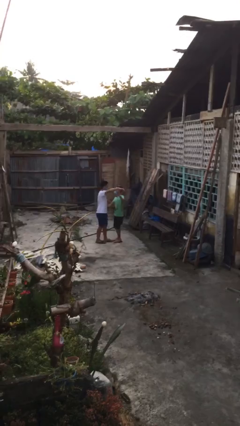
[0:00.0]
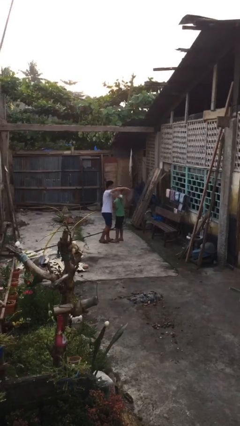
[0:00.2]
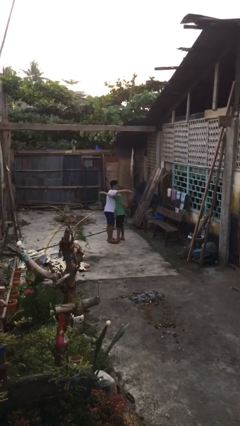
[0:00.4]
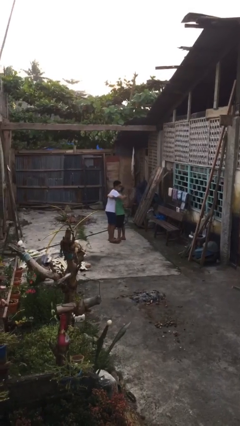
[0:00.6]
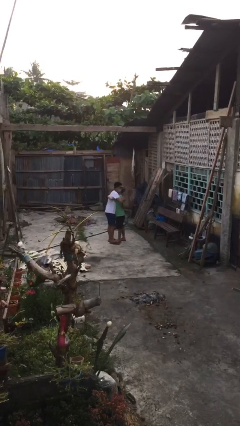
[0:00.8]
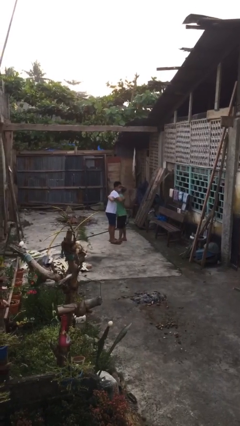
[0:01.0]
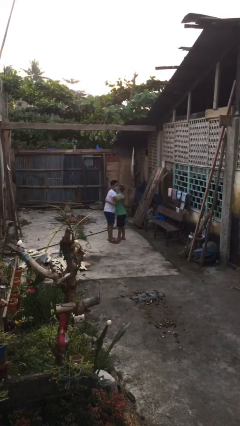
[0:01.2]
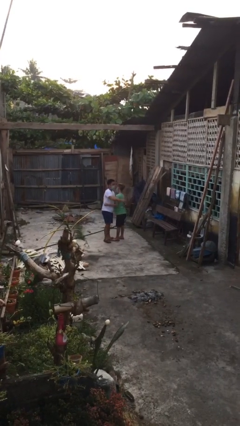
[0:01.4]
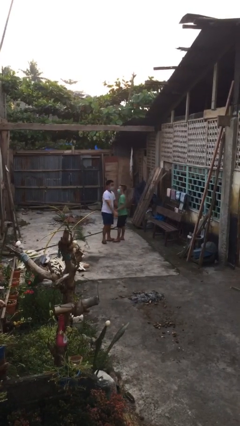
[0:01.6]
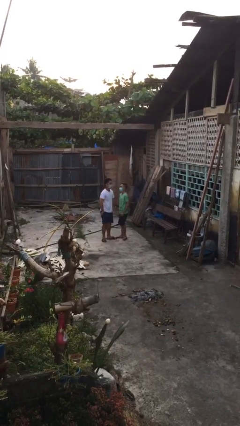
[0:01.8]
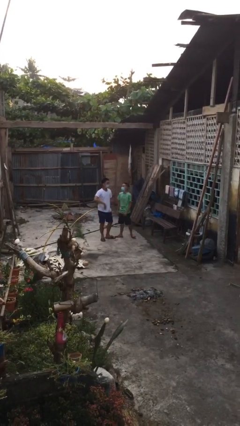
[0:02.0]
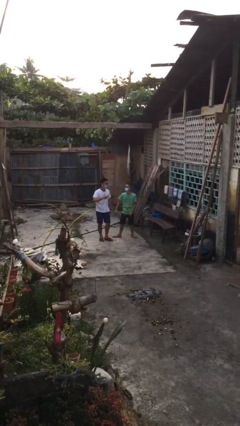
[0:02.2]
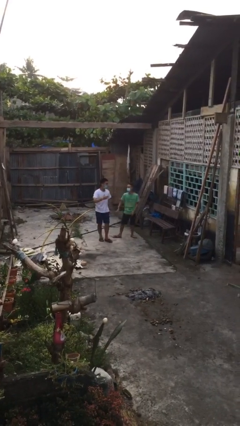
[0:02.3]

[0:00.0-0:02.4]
person embraces person

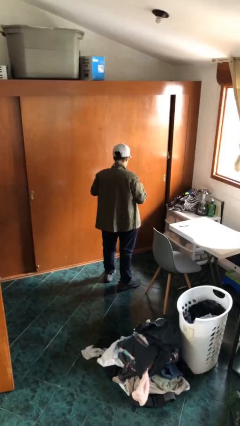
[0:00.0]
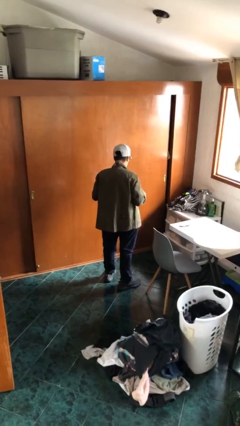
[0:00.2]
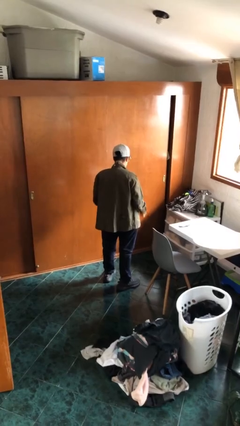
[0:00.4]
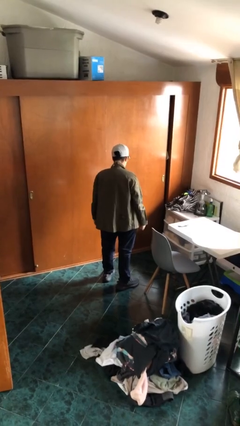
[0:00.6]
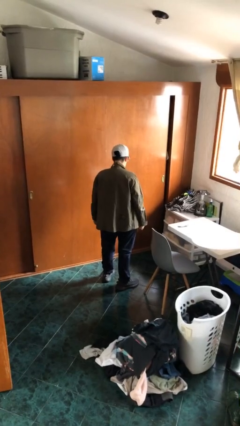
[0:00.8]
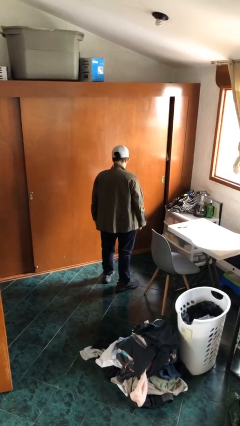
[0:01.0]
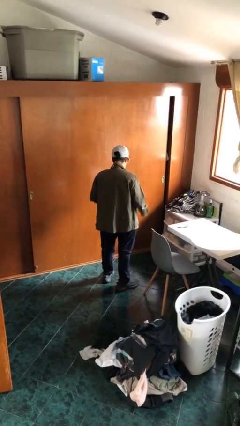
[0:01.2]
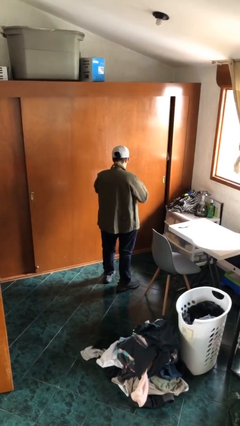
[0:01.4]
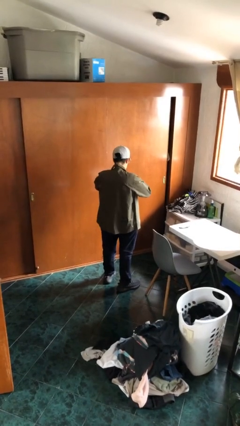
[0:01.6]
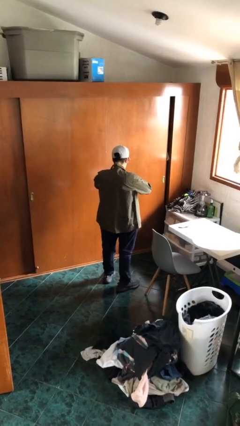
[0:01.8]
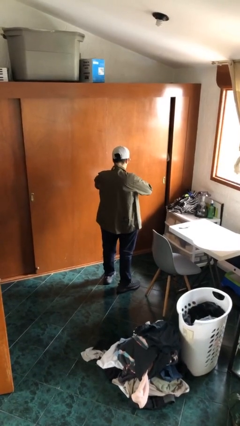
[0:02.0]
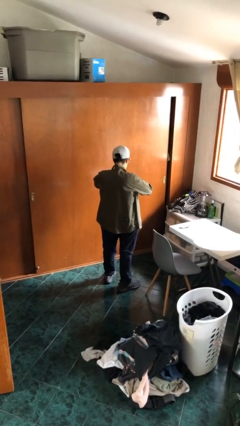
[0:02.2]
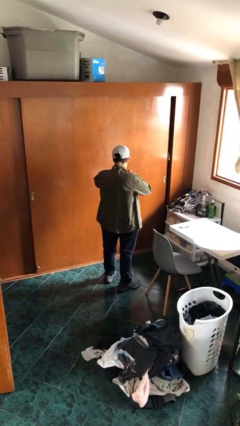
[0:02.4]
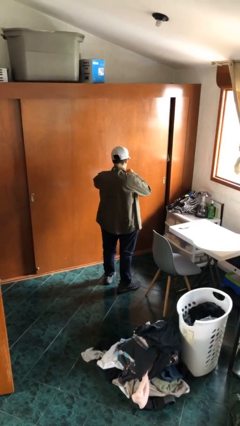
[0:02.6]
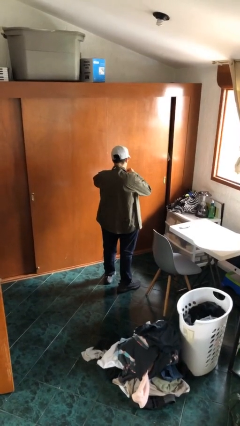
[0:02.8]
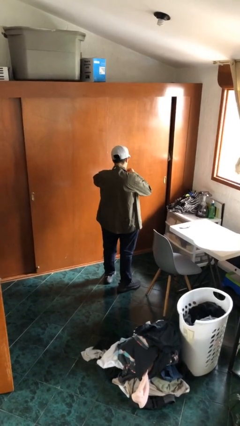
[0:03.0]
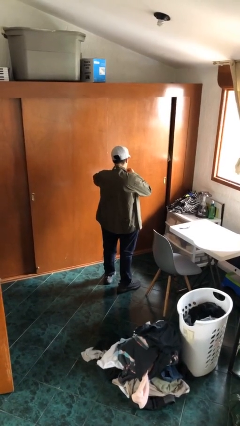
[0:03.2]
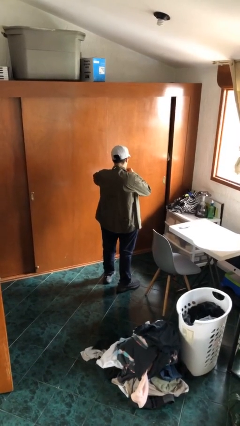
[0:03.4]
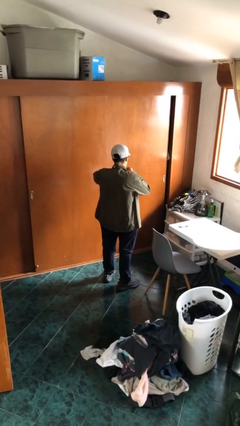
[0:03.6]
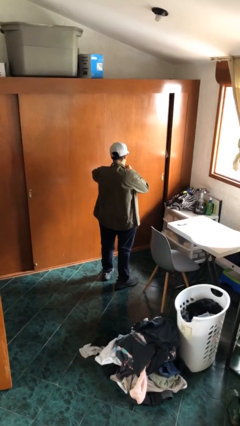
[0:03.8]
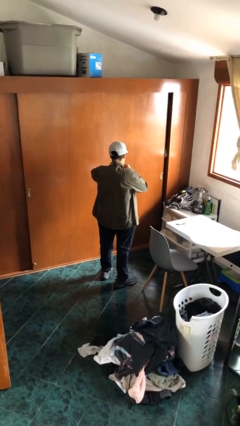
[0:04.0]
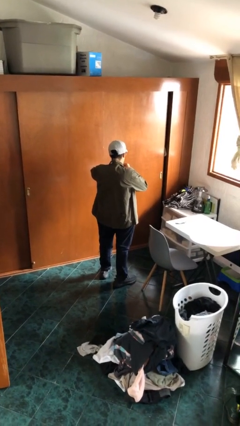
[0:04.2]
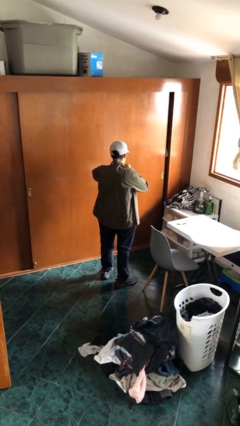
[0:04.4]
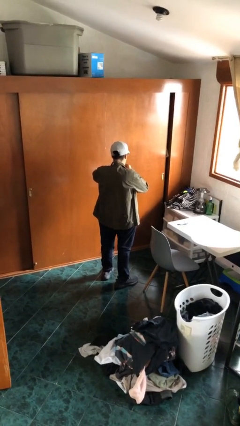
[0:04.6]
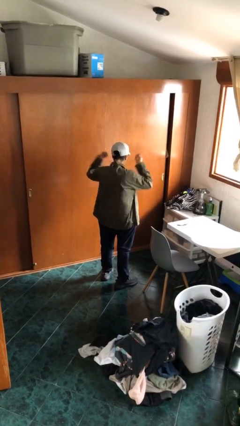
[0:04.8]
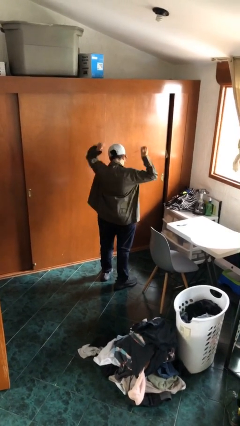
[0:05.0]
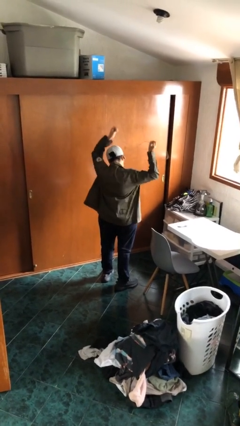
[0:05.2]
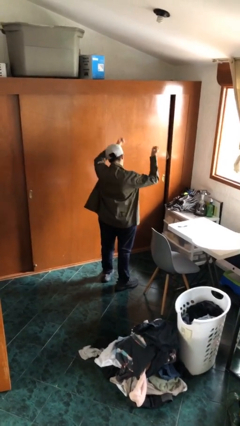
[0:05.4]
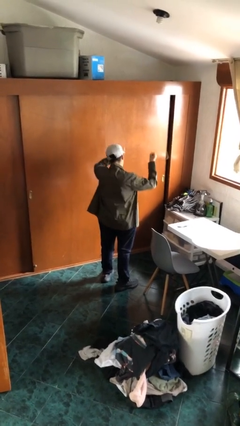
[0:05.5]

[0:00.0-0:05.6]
person takes off necklace

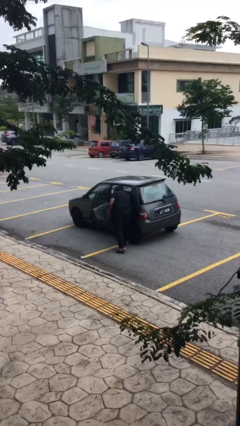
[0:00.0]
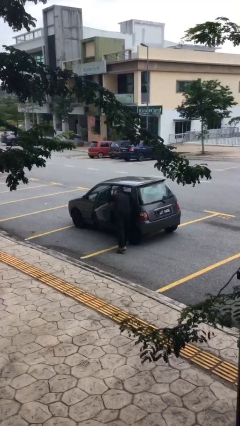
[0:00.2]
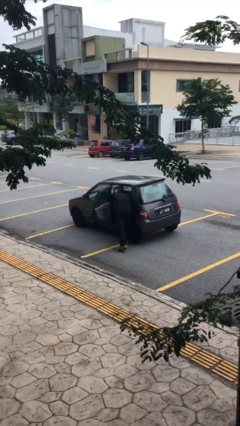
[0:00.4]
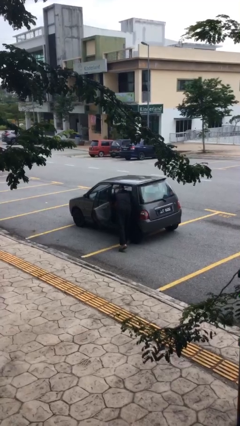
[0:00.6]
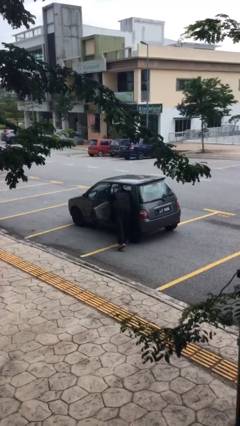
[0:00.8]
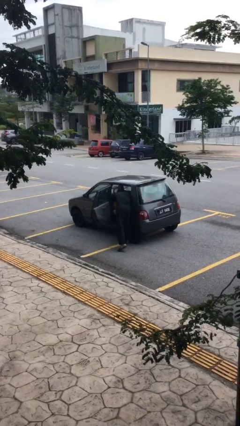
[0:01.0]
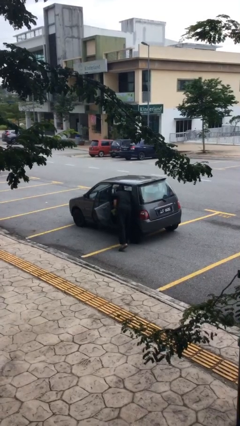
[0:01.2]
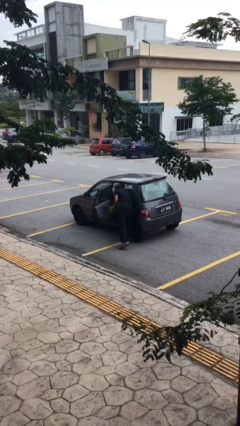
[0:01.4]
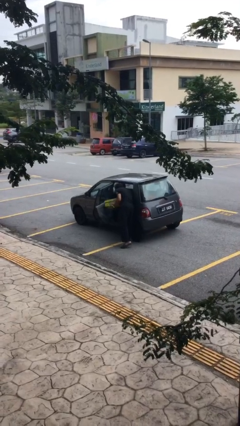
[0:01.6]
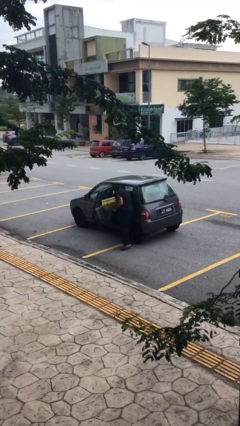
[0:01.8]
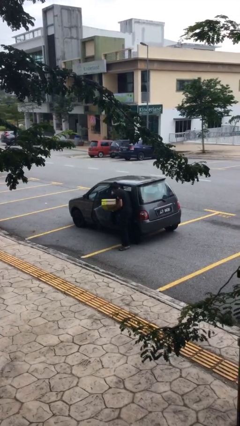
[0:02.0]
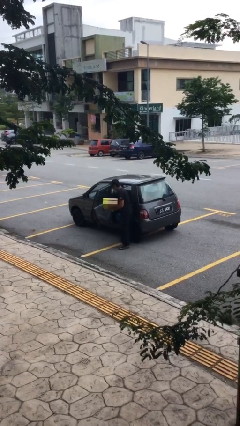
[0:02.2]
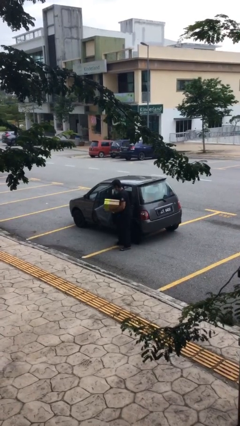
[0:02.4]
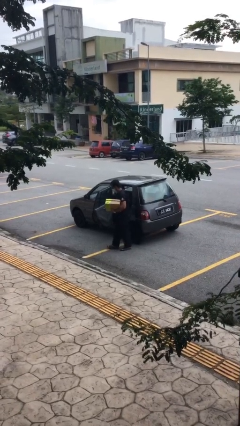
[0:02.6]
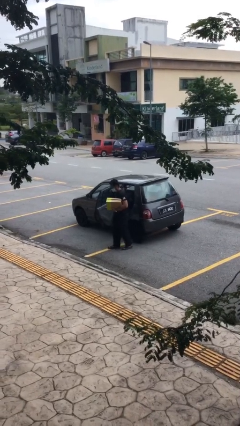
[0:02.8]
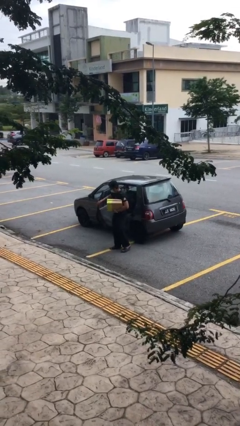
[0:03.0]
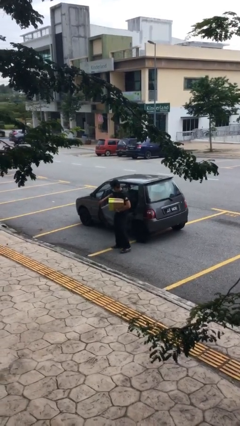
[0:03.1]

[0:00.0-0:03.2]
person unloads car

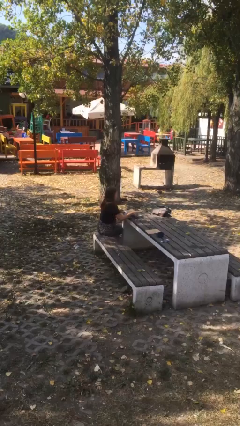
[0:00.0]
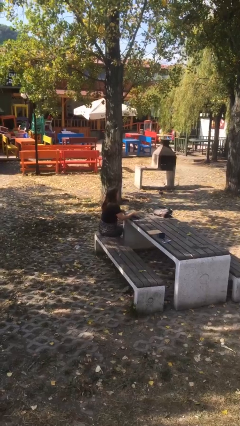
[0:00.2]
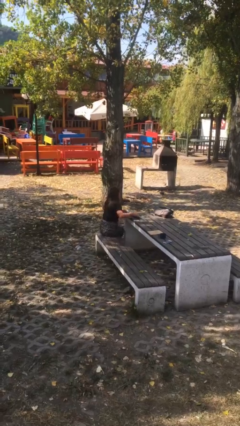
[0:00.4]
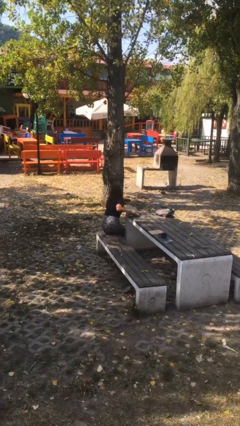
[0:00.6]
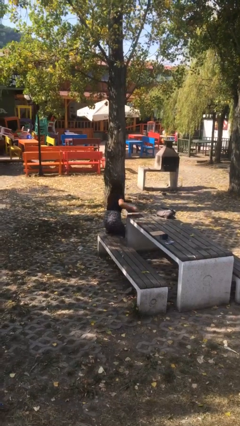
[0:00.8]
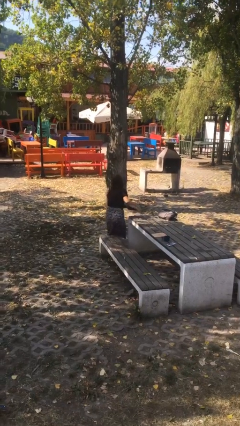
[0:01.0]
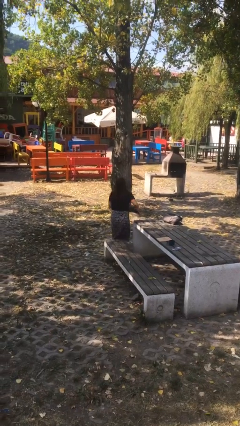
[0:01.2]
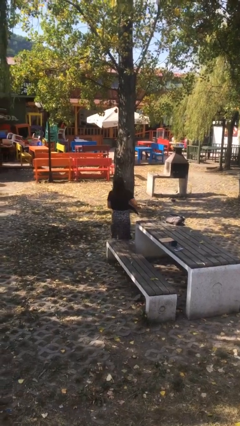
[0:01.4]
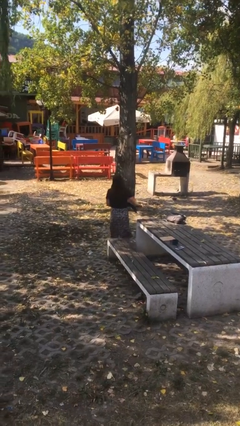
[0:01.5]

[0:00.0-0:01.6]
person stands up

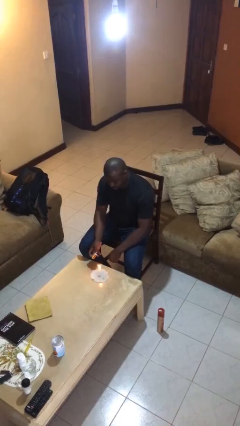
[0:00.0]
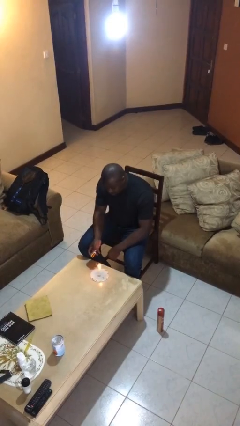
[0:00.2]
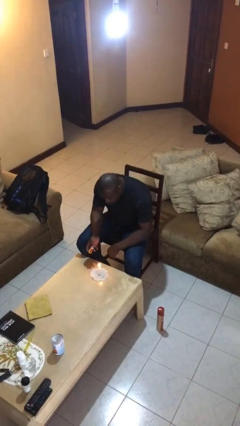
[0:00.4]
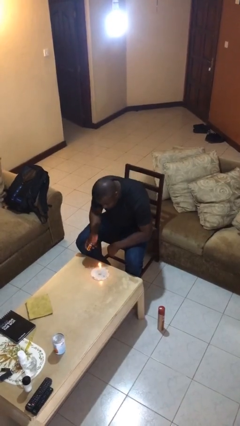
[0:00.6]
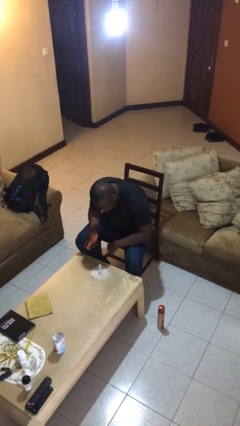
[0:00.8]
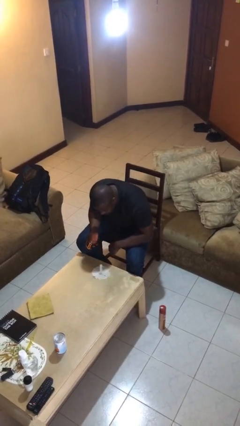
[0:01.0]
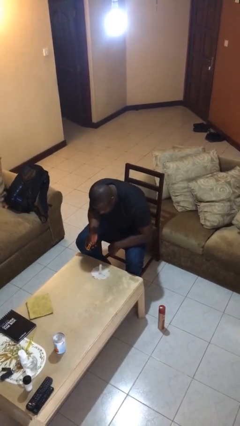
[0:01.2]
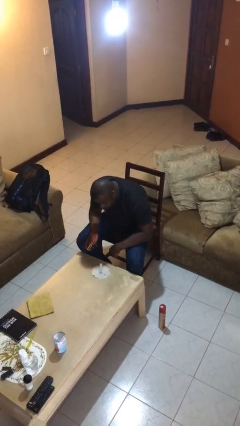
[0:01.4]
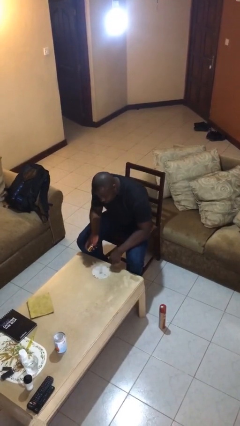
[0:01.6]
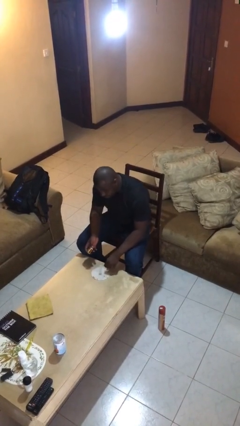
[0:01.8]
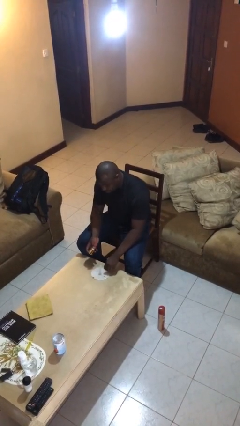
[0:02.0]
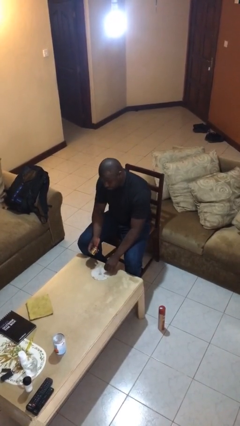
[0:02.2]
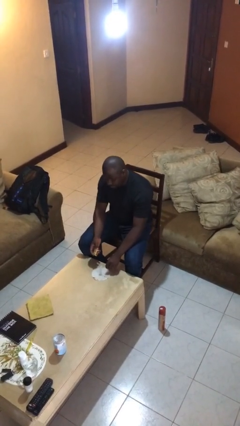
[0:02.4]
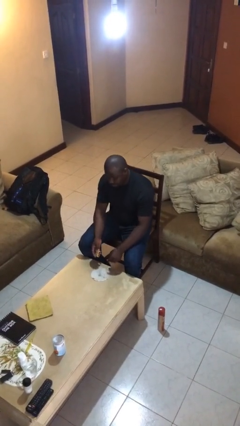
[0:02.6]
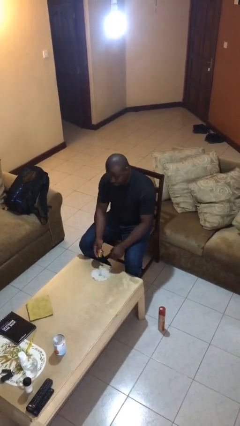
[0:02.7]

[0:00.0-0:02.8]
person extinguishes candle

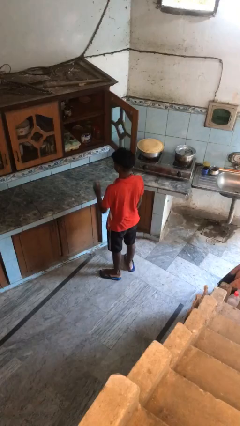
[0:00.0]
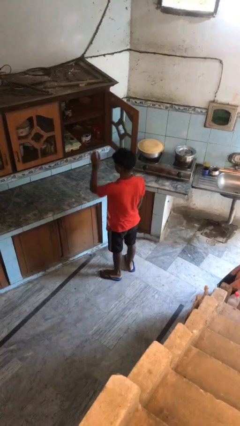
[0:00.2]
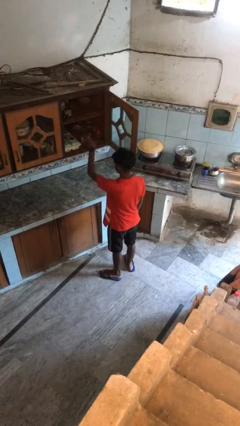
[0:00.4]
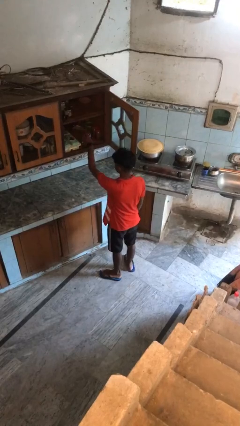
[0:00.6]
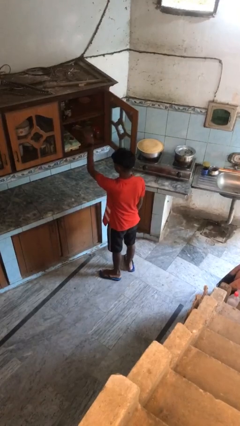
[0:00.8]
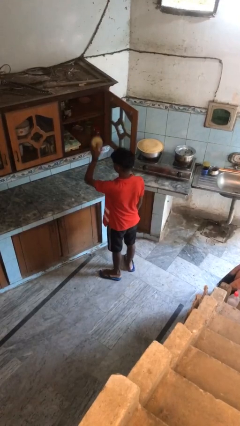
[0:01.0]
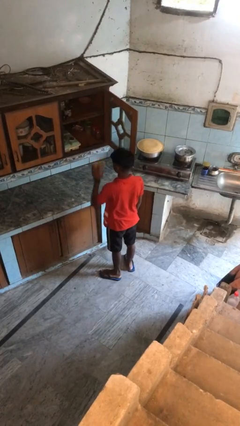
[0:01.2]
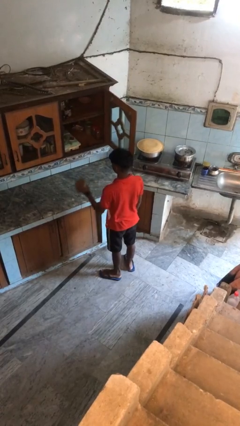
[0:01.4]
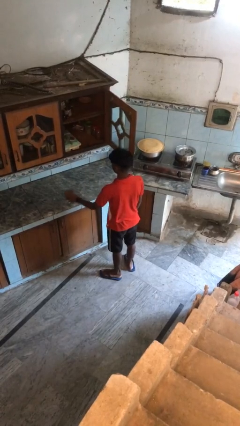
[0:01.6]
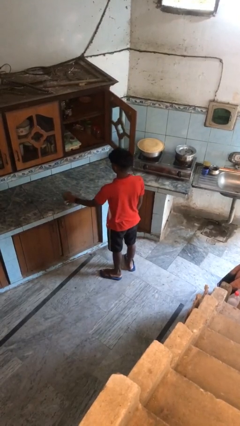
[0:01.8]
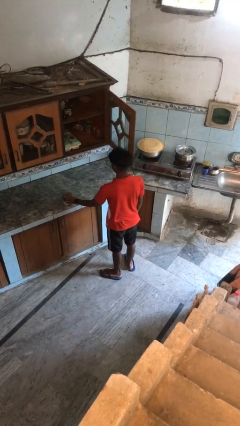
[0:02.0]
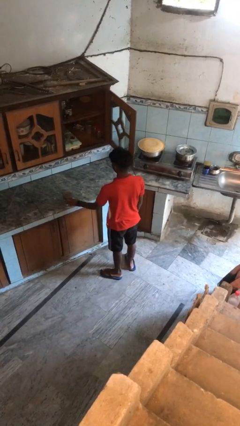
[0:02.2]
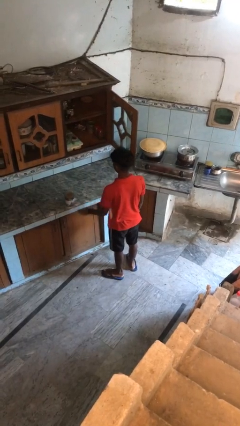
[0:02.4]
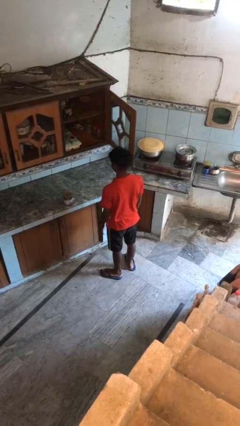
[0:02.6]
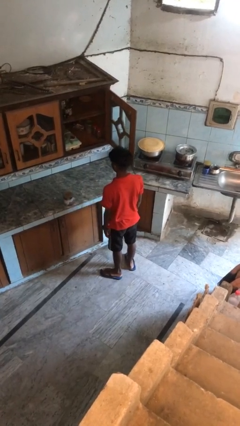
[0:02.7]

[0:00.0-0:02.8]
person takes object from cabinet
